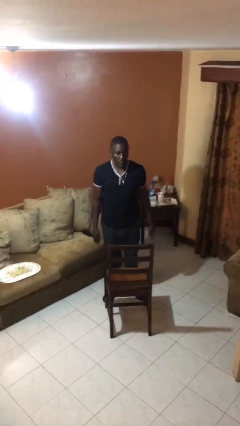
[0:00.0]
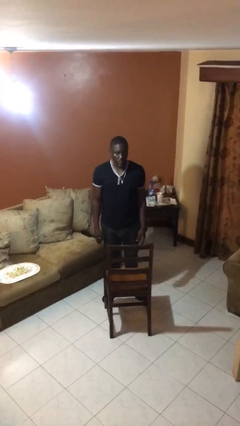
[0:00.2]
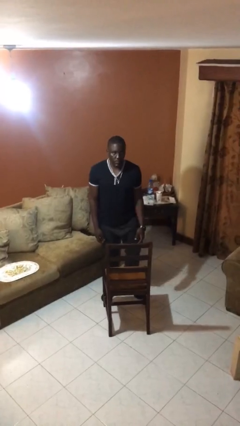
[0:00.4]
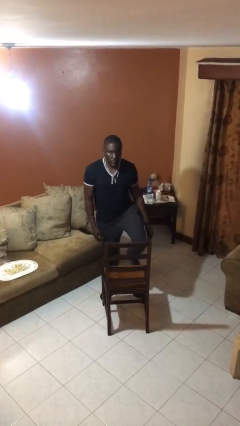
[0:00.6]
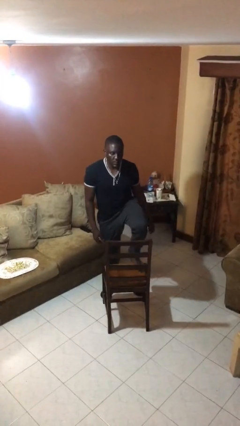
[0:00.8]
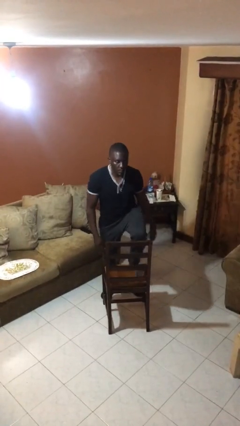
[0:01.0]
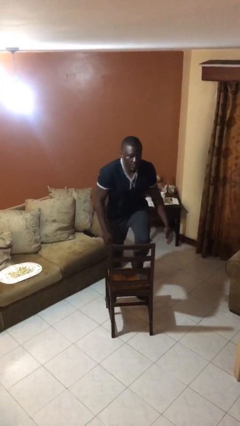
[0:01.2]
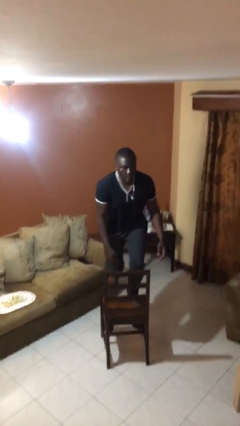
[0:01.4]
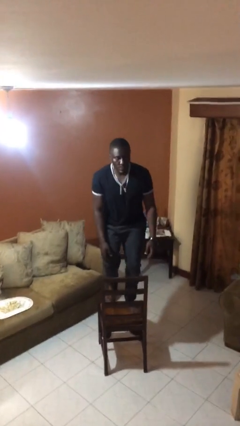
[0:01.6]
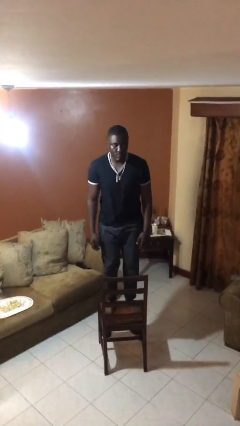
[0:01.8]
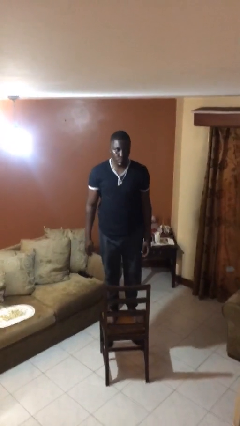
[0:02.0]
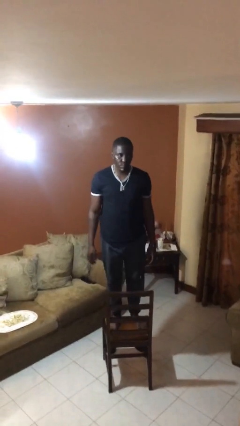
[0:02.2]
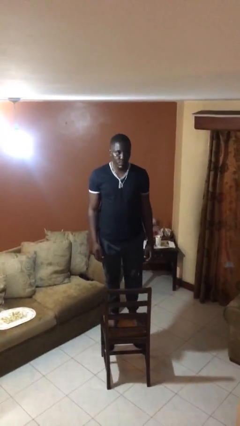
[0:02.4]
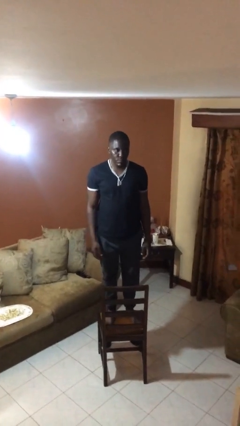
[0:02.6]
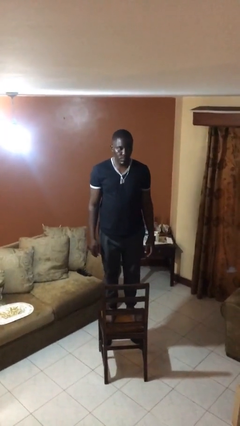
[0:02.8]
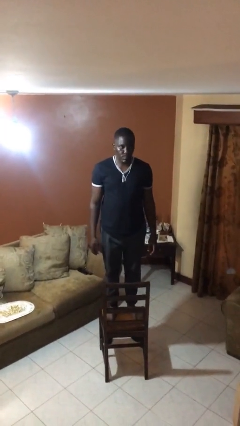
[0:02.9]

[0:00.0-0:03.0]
person climbs on chair

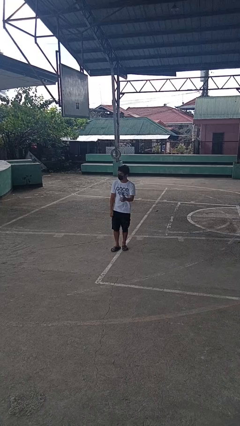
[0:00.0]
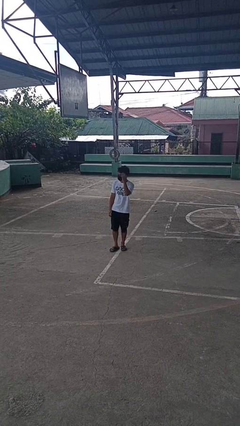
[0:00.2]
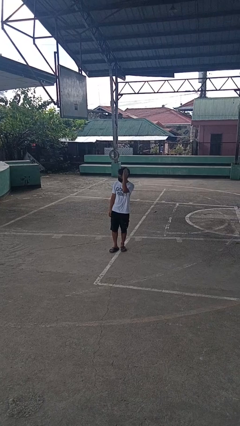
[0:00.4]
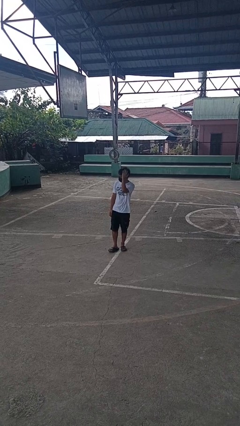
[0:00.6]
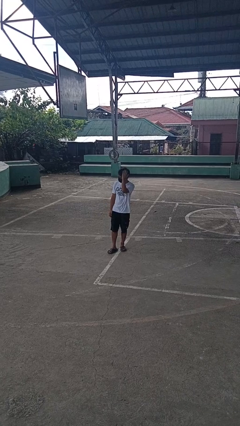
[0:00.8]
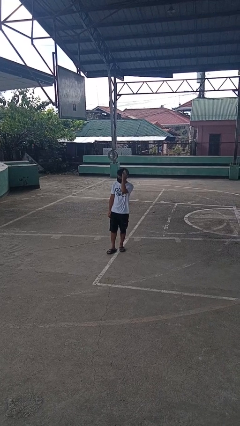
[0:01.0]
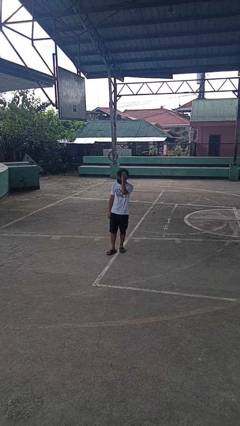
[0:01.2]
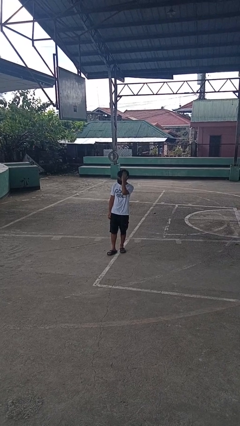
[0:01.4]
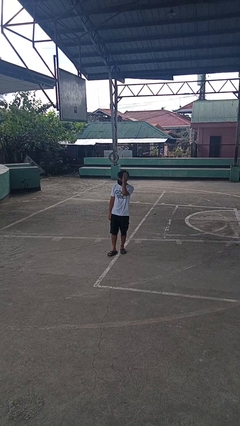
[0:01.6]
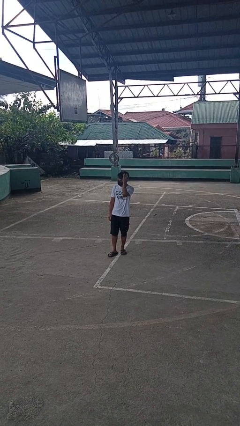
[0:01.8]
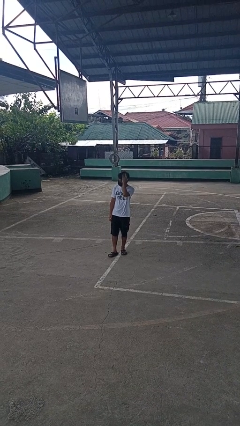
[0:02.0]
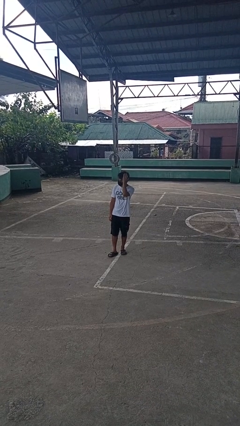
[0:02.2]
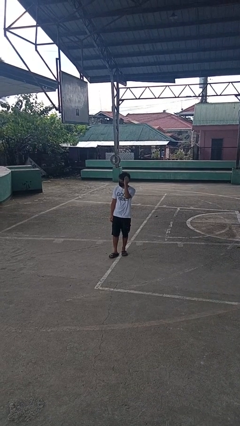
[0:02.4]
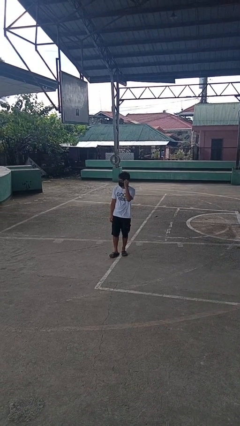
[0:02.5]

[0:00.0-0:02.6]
person pats head

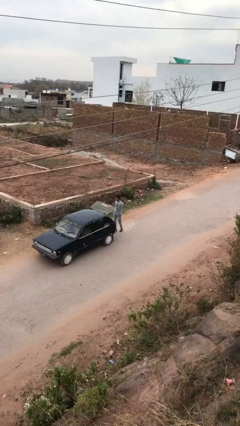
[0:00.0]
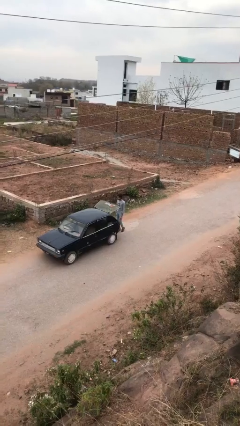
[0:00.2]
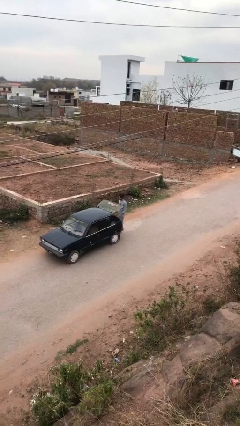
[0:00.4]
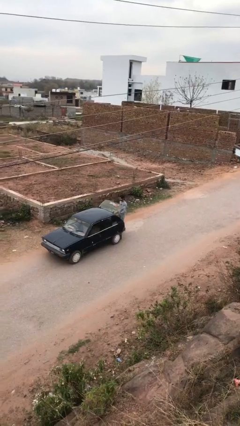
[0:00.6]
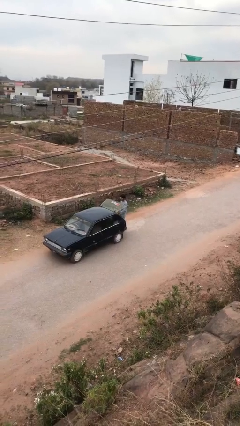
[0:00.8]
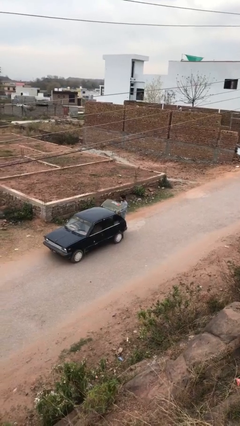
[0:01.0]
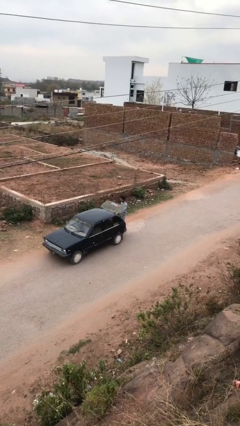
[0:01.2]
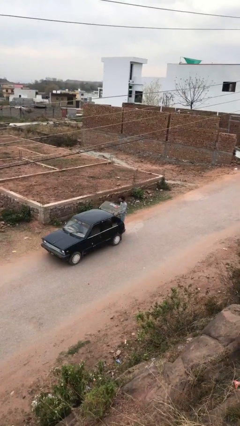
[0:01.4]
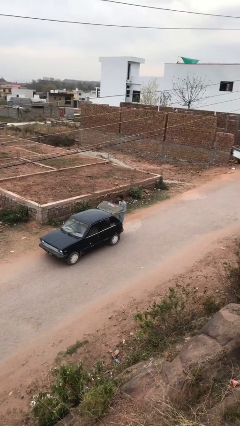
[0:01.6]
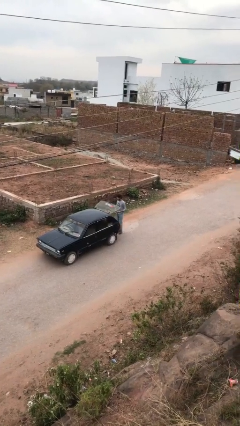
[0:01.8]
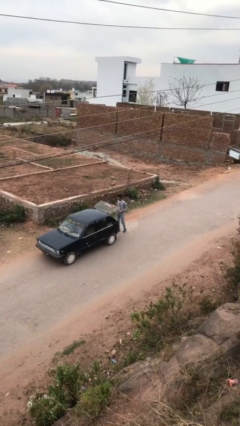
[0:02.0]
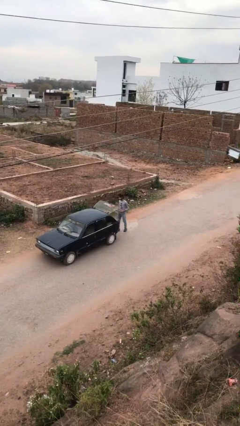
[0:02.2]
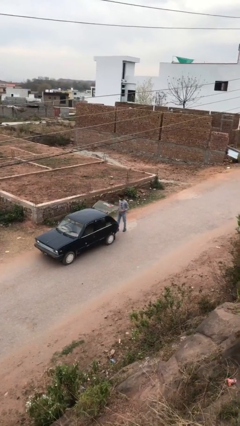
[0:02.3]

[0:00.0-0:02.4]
person unloads car

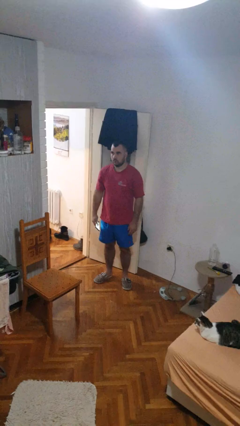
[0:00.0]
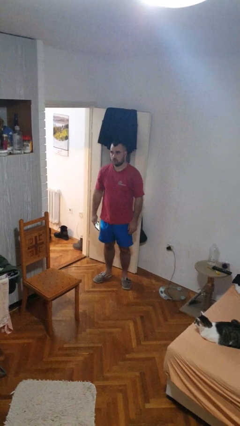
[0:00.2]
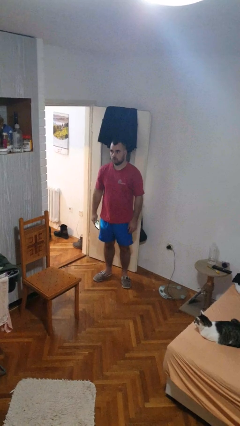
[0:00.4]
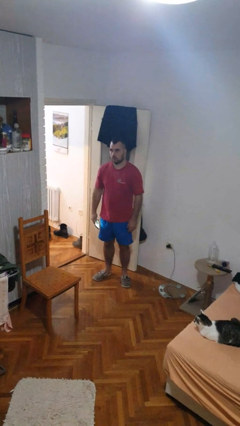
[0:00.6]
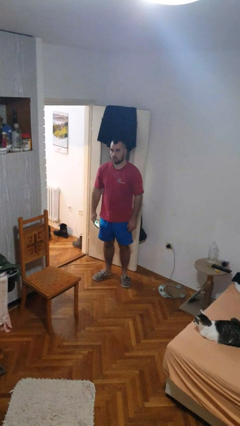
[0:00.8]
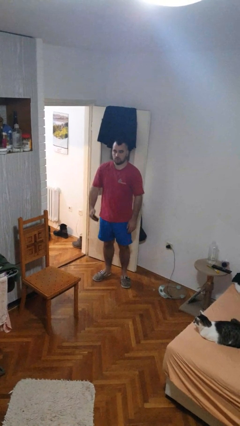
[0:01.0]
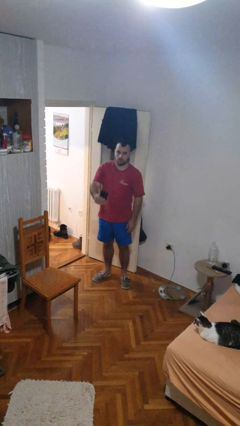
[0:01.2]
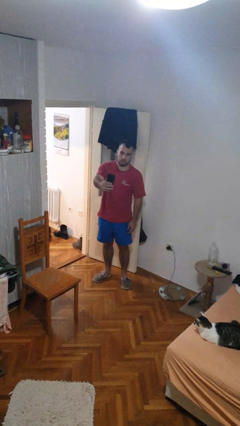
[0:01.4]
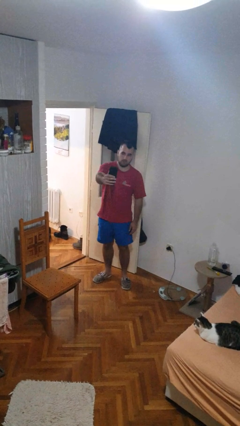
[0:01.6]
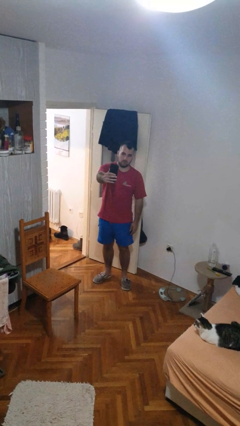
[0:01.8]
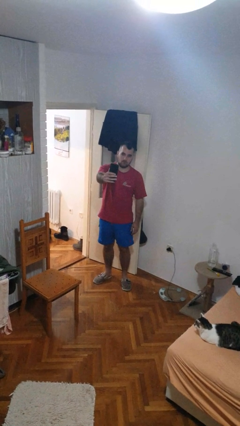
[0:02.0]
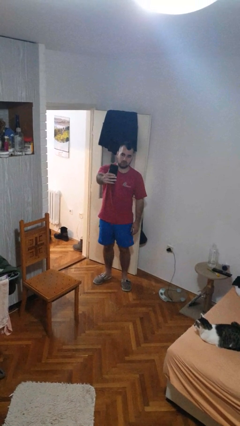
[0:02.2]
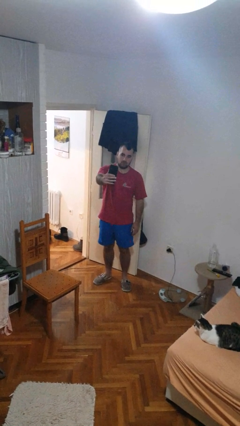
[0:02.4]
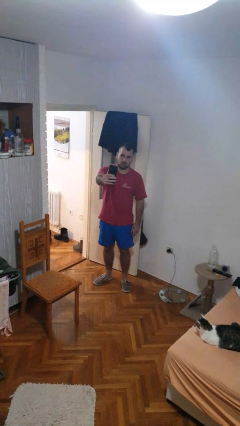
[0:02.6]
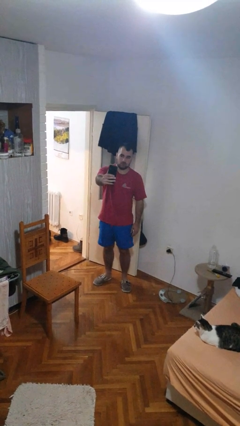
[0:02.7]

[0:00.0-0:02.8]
person takes selfie

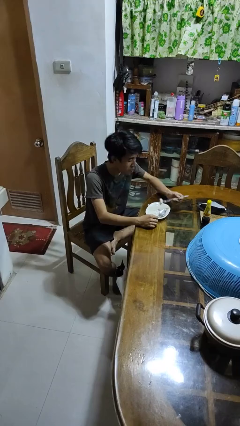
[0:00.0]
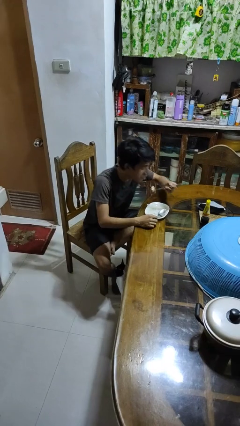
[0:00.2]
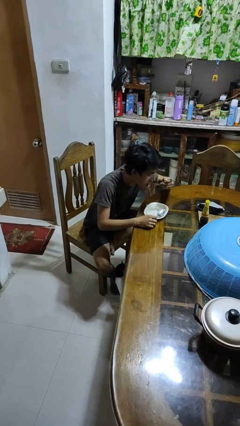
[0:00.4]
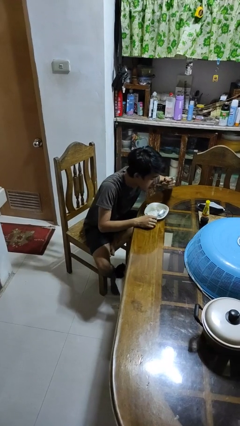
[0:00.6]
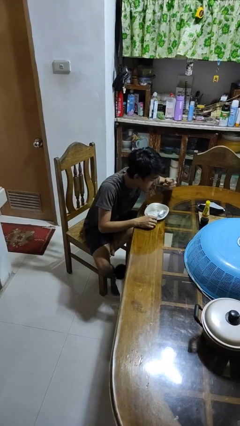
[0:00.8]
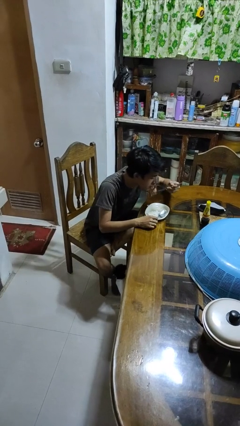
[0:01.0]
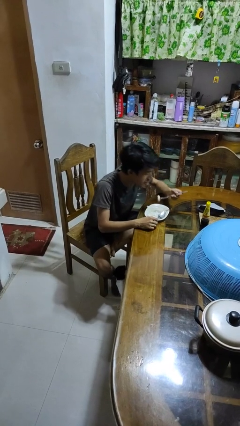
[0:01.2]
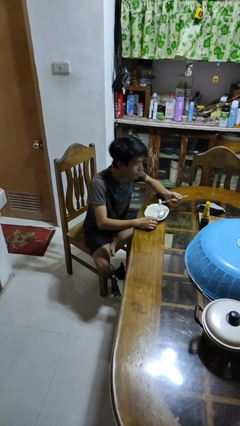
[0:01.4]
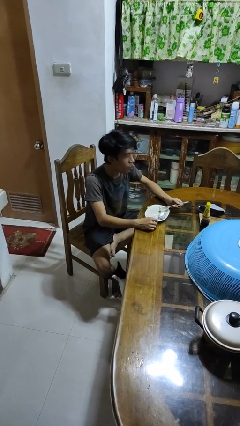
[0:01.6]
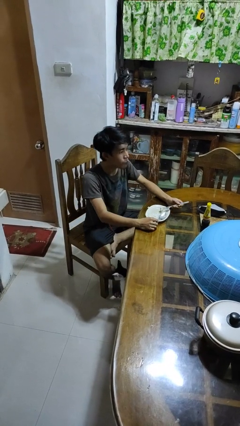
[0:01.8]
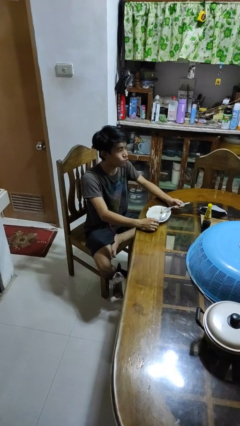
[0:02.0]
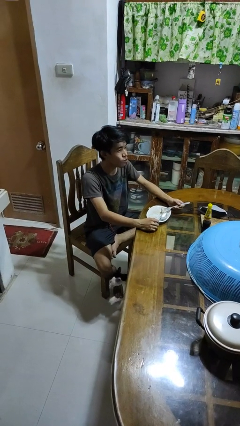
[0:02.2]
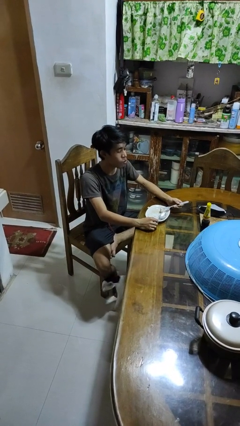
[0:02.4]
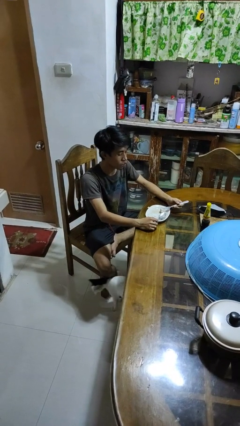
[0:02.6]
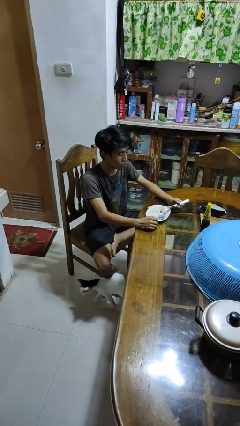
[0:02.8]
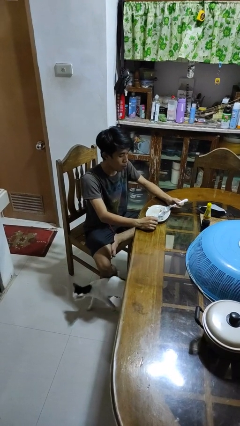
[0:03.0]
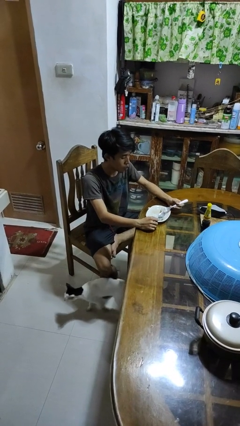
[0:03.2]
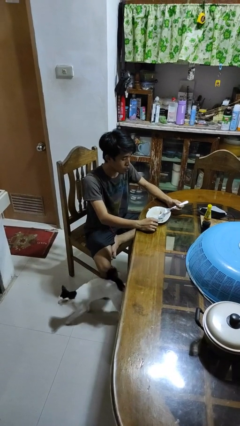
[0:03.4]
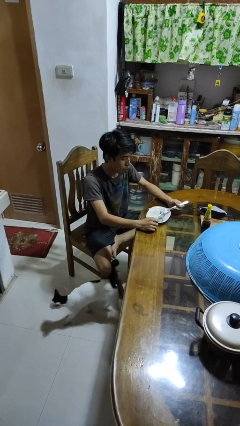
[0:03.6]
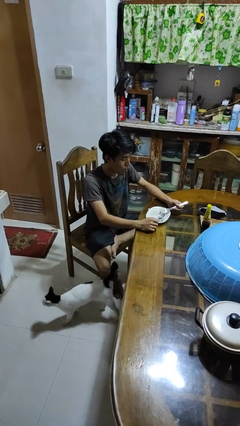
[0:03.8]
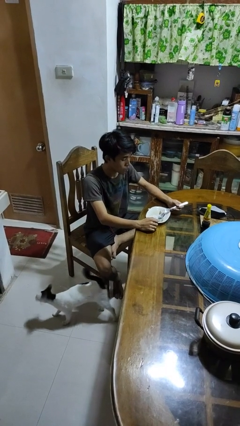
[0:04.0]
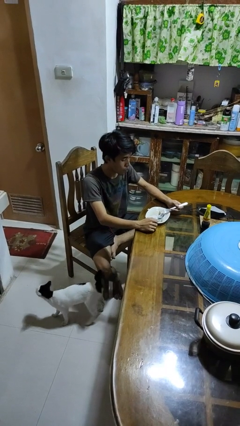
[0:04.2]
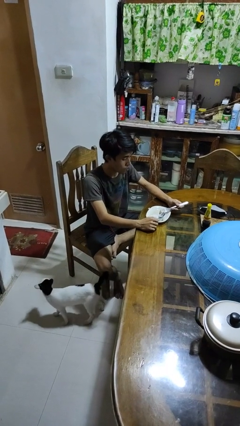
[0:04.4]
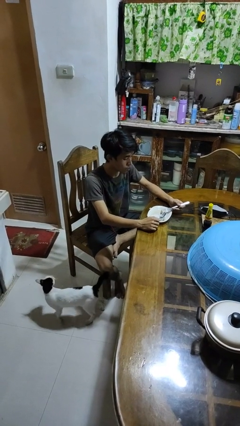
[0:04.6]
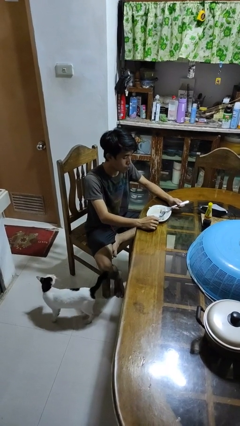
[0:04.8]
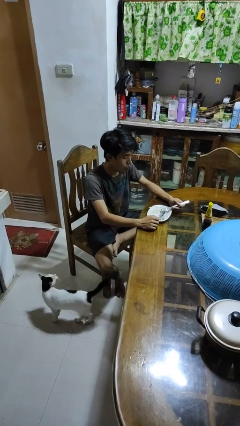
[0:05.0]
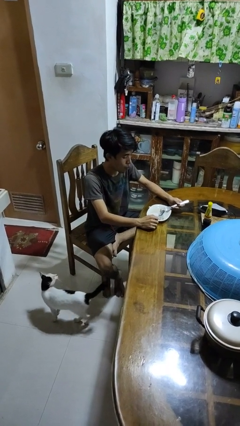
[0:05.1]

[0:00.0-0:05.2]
person eats with utensil

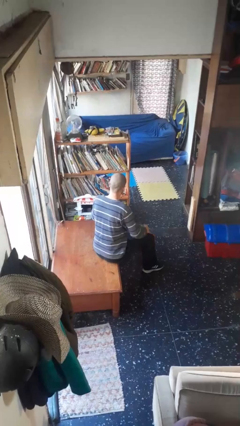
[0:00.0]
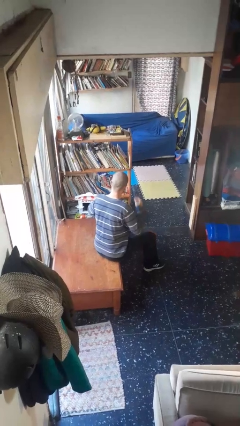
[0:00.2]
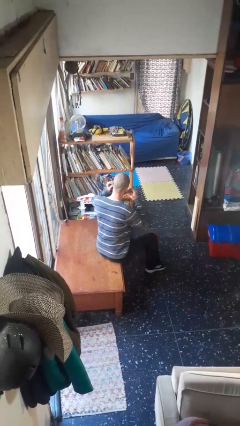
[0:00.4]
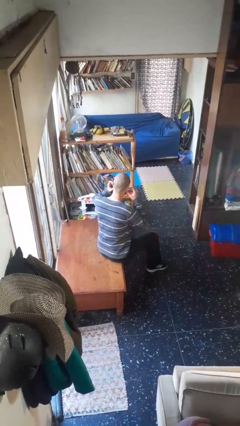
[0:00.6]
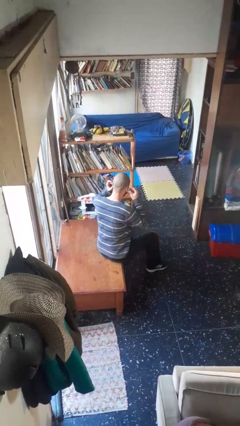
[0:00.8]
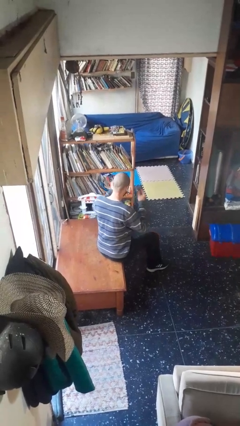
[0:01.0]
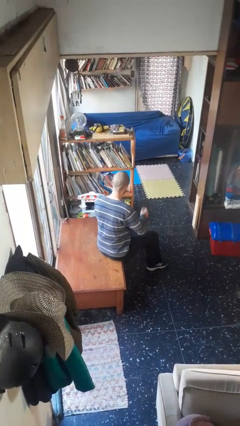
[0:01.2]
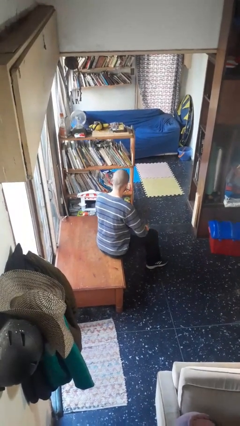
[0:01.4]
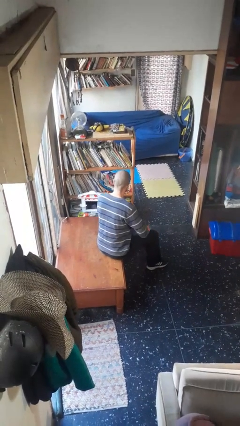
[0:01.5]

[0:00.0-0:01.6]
person takes off headphones

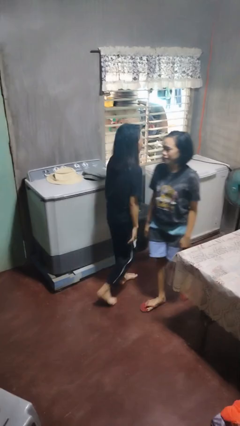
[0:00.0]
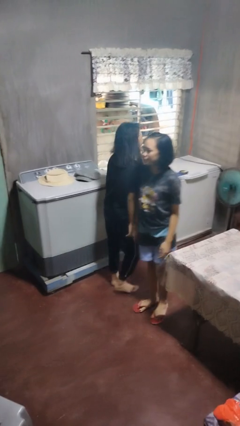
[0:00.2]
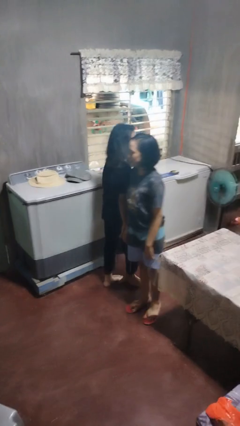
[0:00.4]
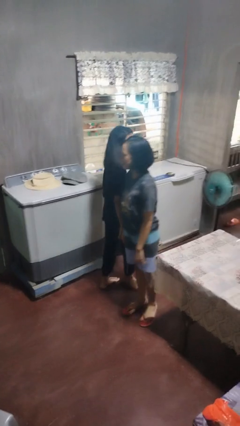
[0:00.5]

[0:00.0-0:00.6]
person bumps into person
